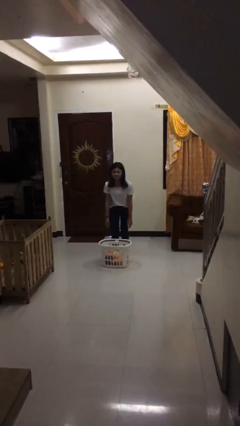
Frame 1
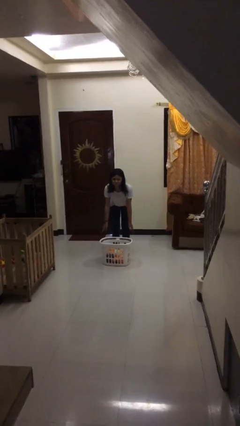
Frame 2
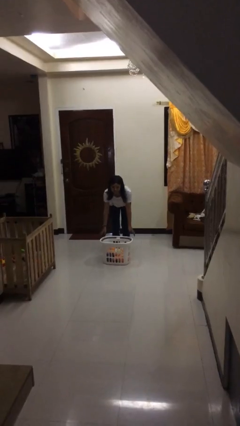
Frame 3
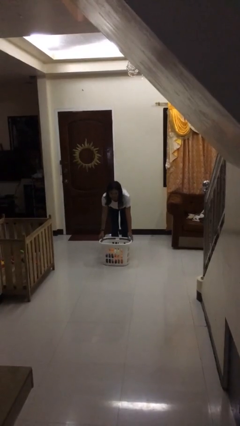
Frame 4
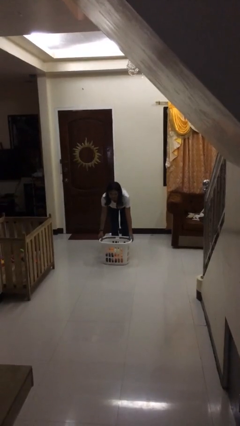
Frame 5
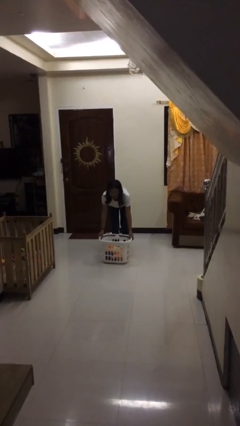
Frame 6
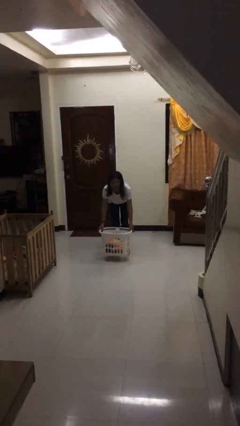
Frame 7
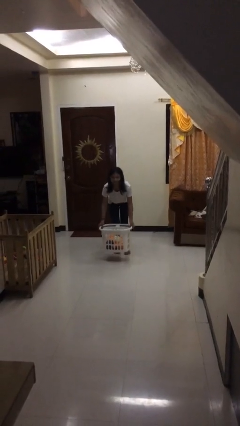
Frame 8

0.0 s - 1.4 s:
person picks up object from floor

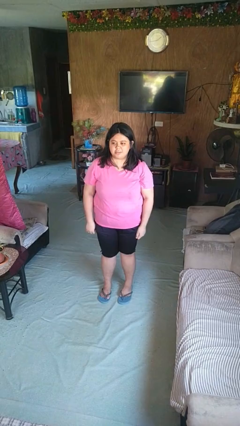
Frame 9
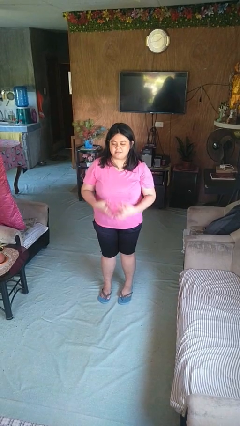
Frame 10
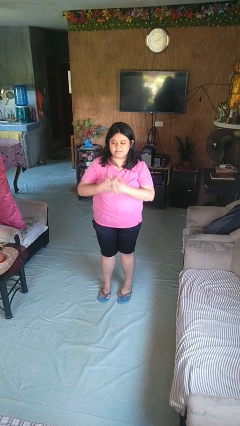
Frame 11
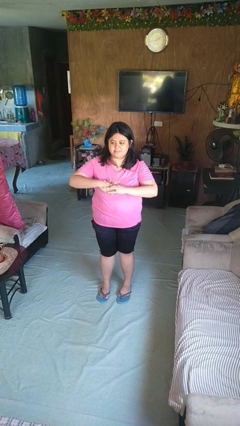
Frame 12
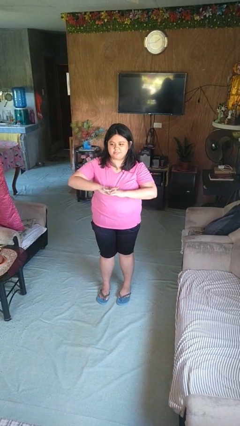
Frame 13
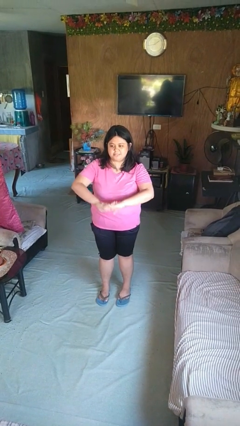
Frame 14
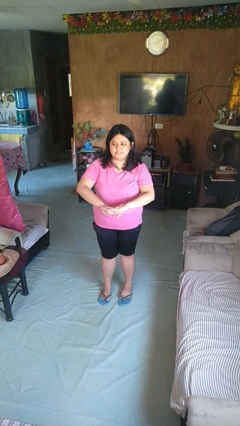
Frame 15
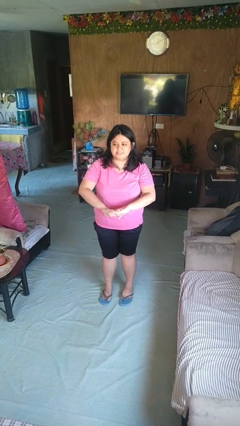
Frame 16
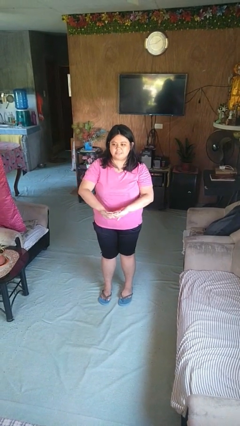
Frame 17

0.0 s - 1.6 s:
person cracks knuckles

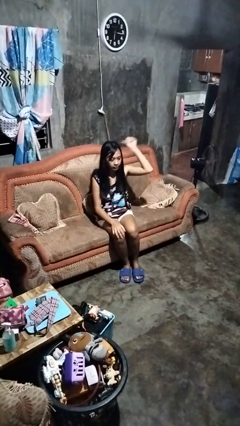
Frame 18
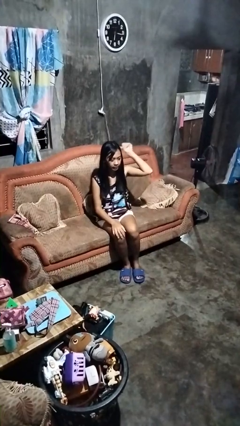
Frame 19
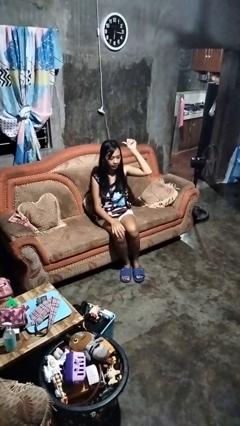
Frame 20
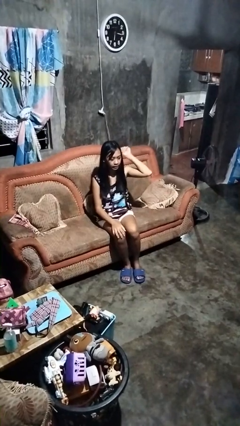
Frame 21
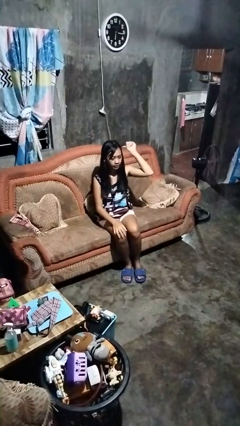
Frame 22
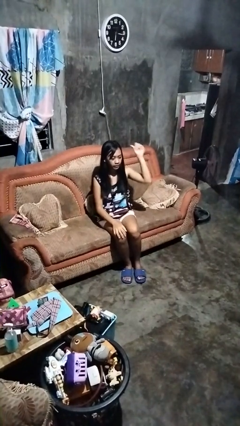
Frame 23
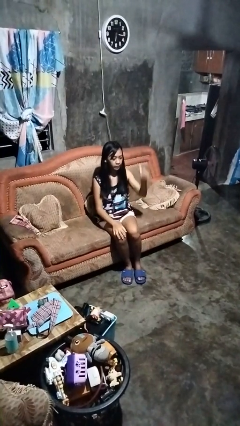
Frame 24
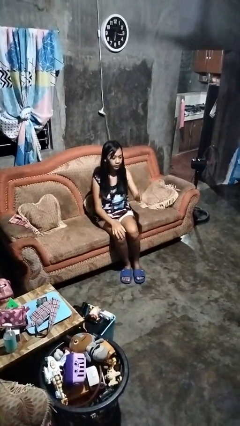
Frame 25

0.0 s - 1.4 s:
person gestures behind me

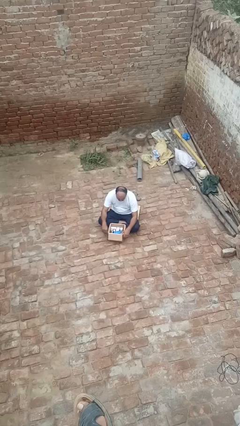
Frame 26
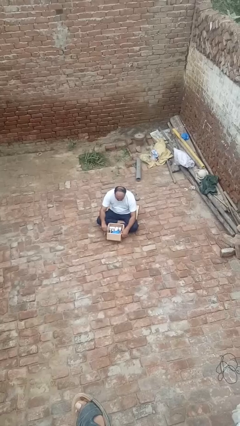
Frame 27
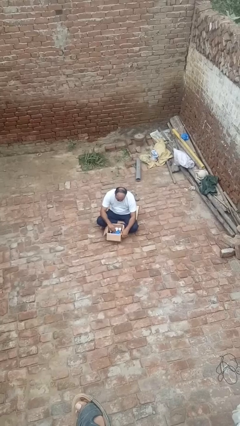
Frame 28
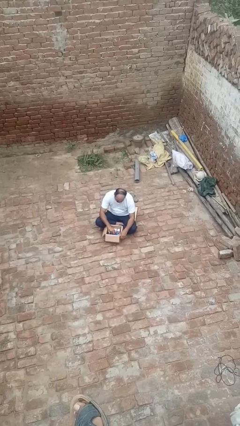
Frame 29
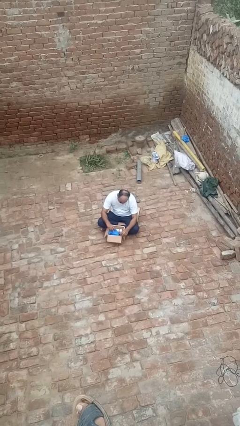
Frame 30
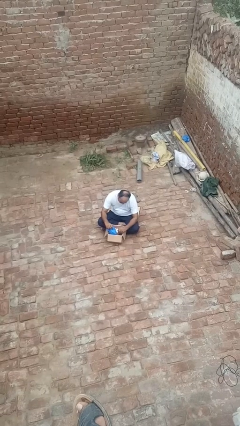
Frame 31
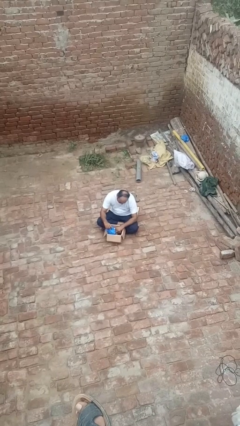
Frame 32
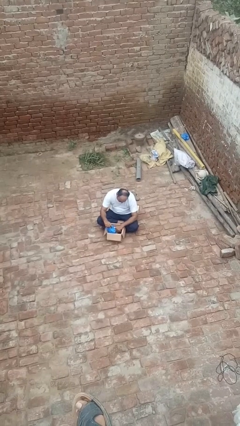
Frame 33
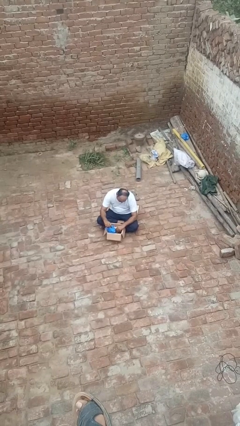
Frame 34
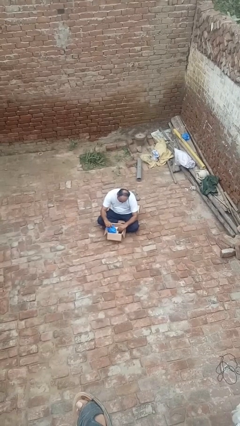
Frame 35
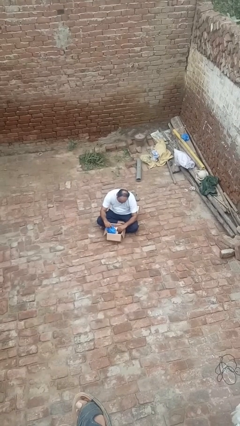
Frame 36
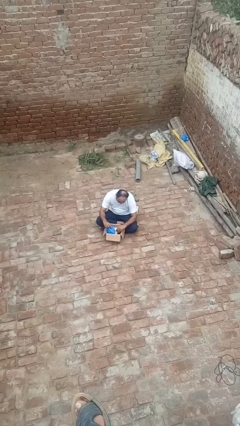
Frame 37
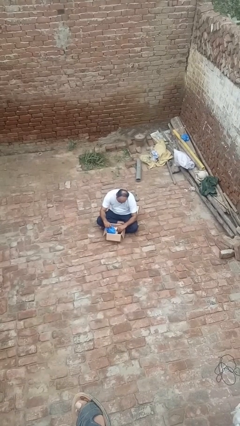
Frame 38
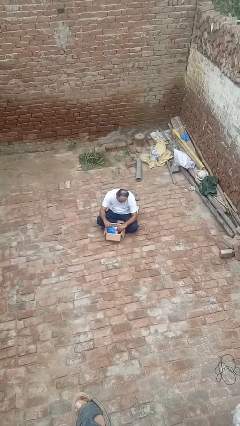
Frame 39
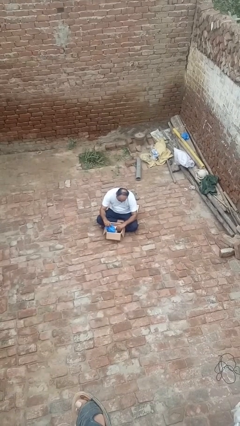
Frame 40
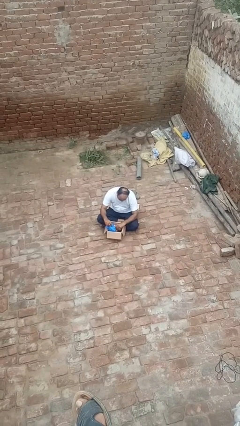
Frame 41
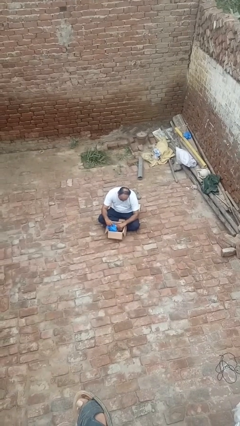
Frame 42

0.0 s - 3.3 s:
person searches in box

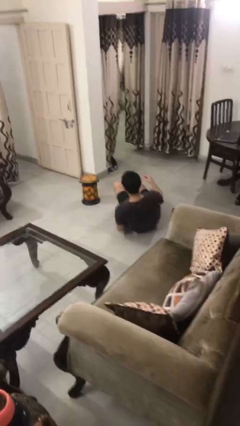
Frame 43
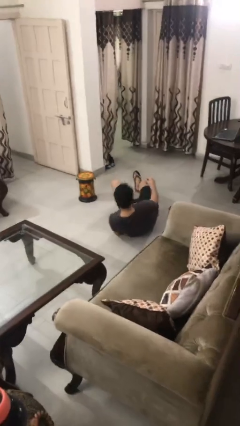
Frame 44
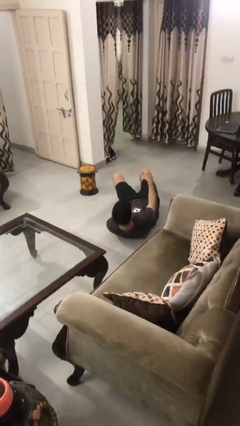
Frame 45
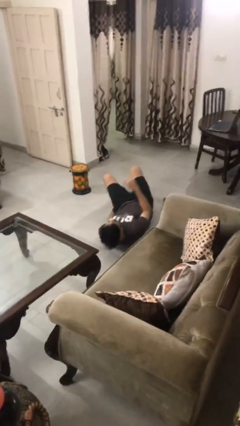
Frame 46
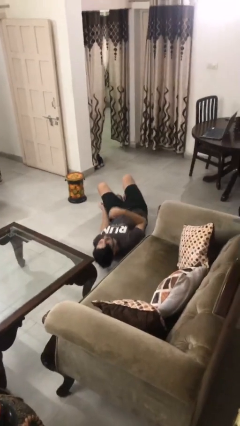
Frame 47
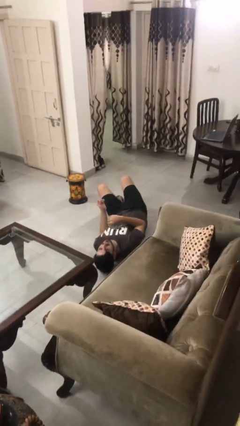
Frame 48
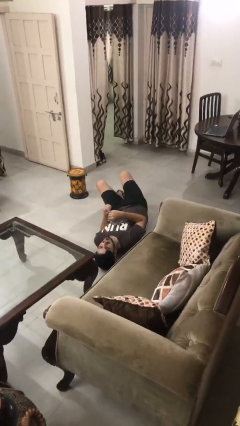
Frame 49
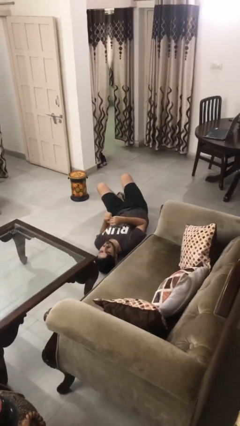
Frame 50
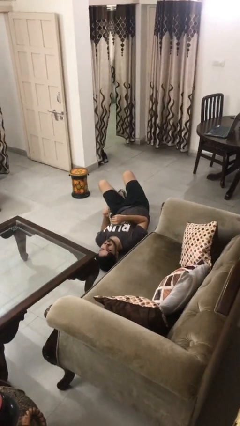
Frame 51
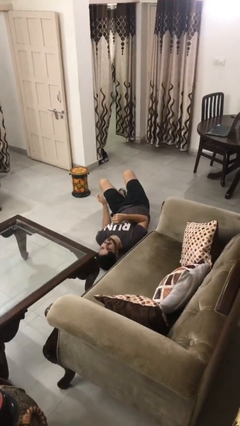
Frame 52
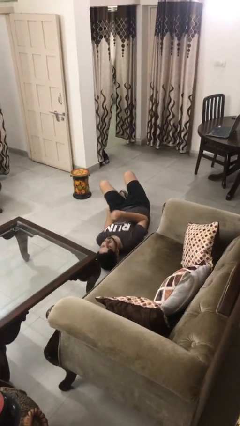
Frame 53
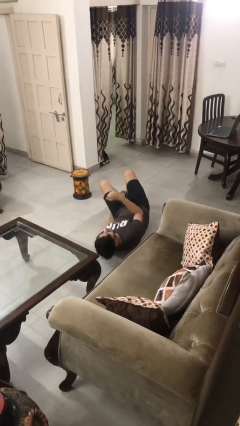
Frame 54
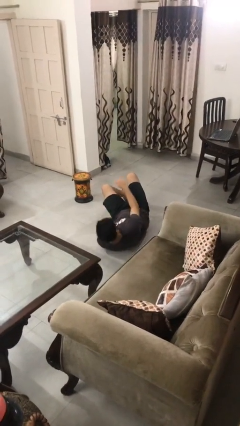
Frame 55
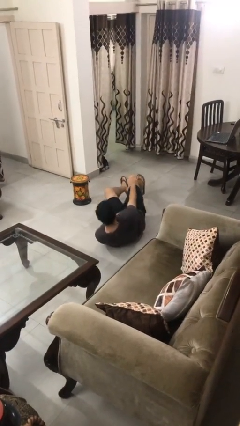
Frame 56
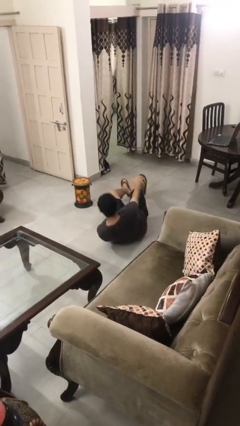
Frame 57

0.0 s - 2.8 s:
person lies down on floor

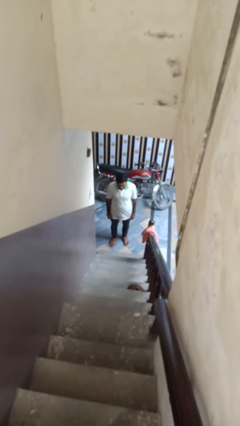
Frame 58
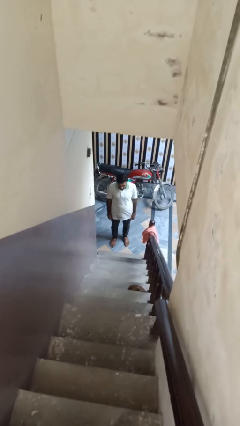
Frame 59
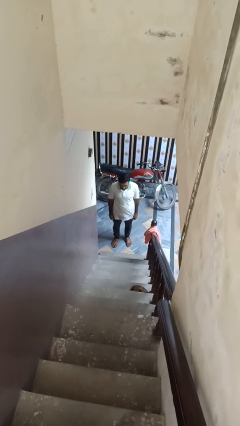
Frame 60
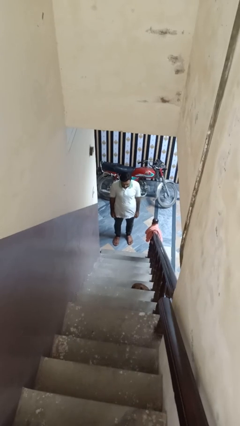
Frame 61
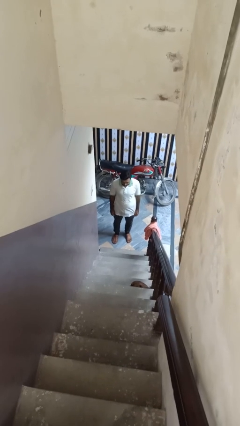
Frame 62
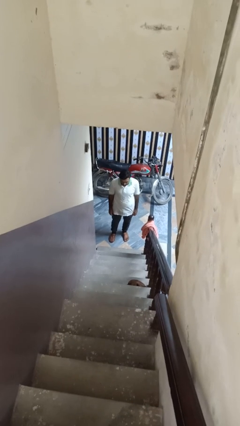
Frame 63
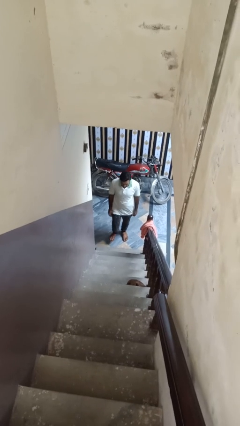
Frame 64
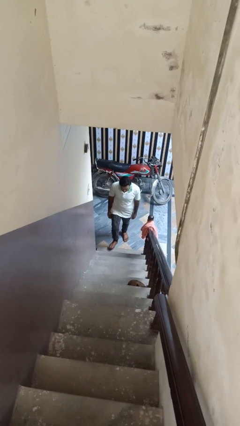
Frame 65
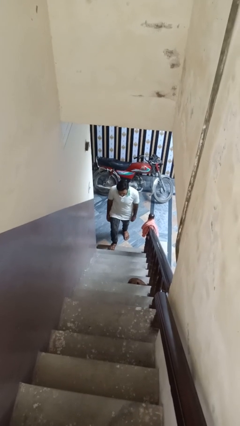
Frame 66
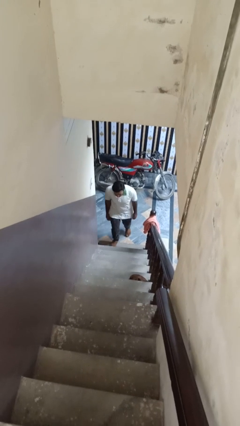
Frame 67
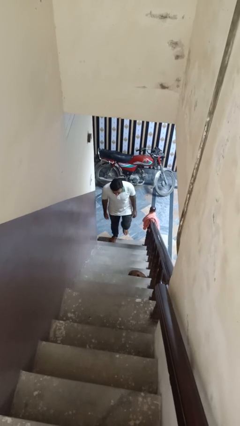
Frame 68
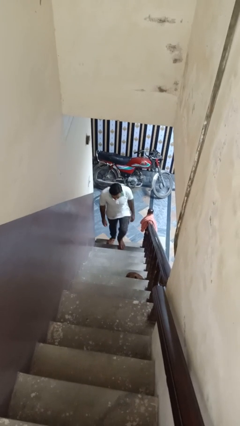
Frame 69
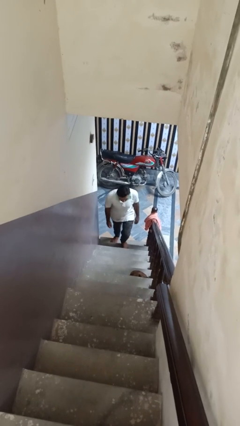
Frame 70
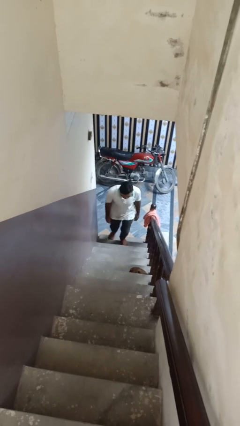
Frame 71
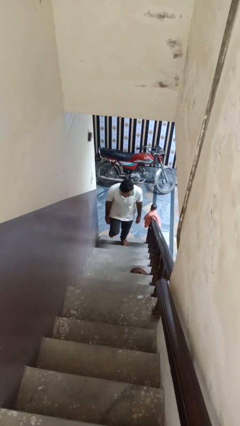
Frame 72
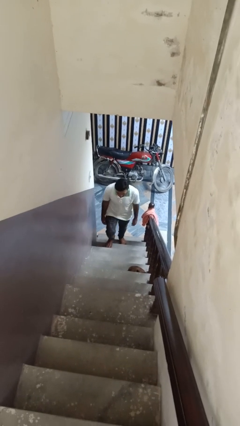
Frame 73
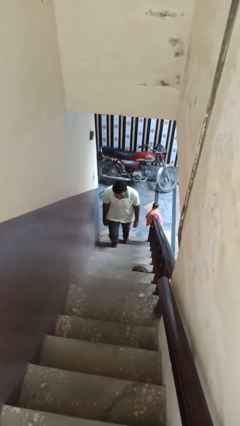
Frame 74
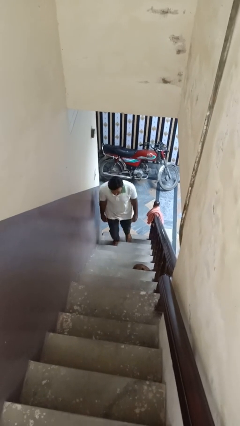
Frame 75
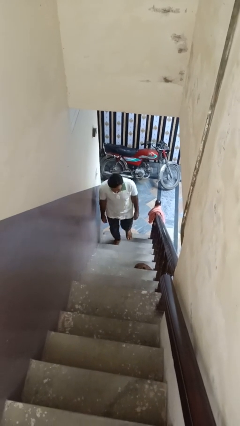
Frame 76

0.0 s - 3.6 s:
person climbs up ladder

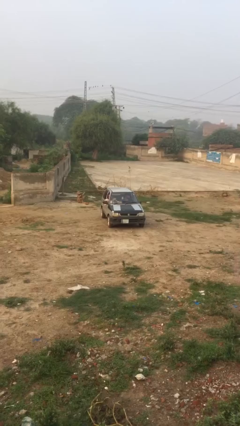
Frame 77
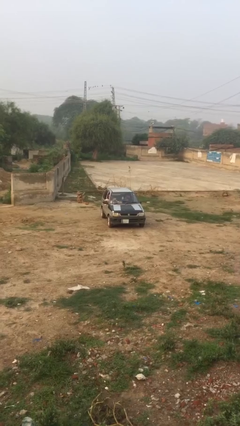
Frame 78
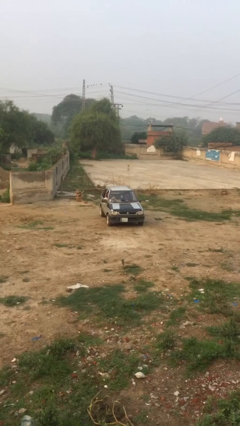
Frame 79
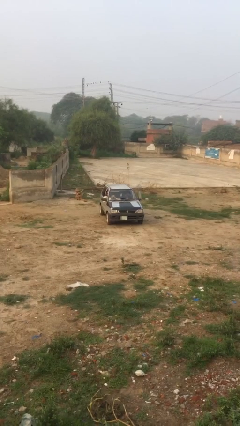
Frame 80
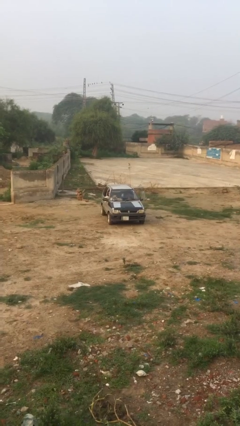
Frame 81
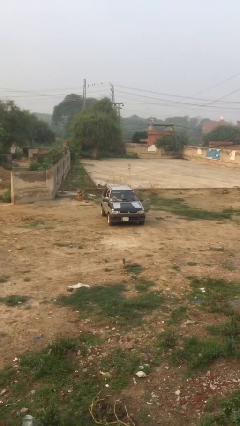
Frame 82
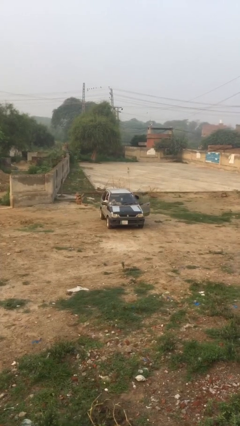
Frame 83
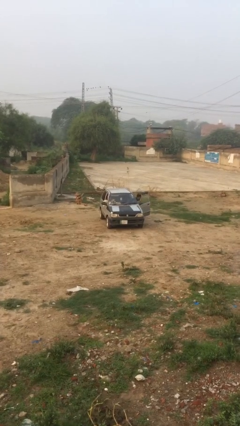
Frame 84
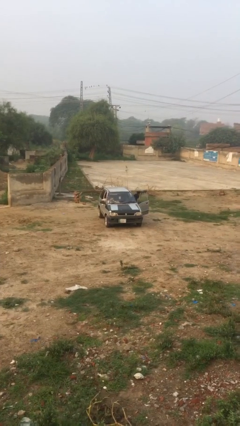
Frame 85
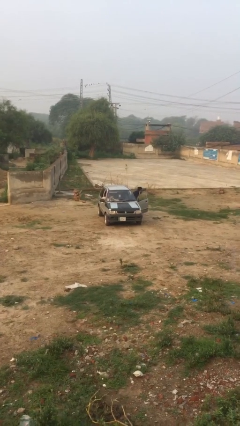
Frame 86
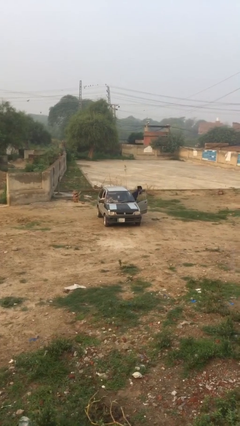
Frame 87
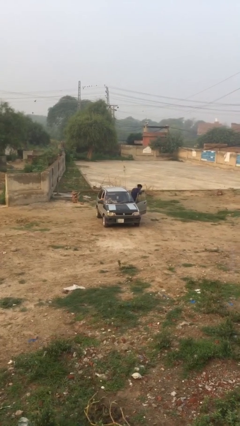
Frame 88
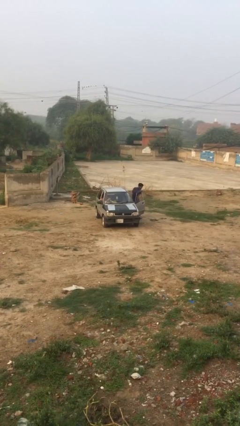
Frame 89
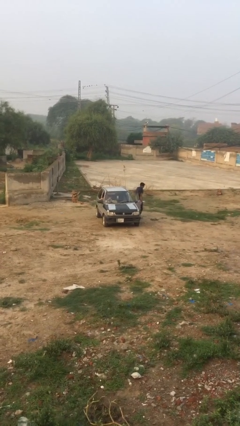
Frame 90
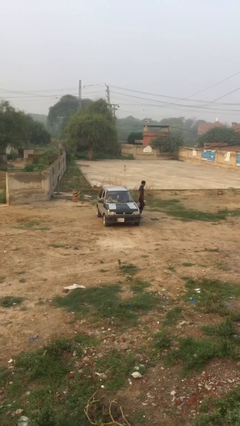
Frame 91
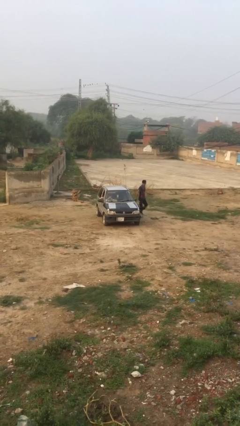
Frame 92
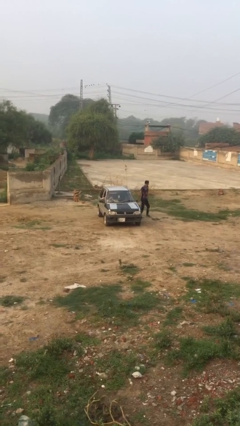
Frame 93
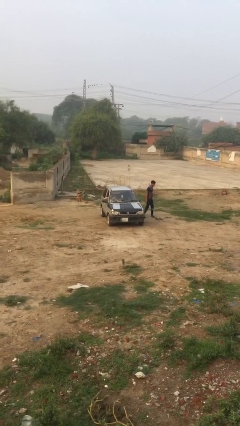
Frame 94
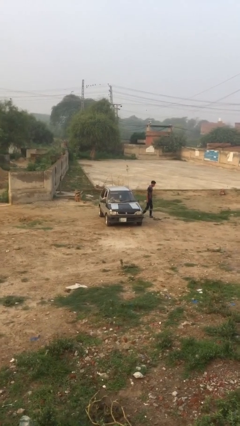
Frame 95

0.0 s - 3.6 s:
car drops off person
